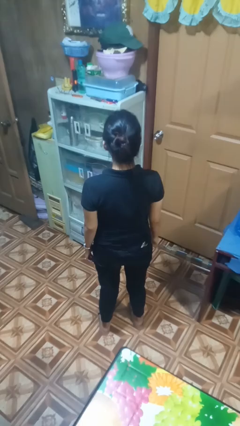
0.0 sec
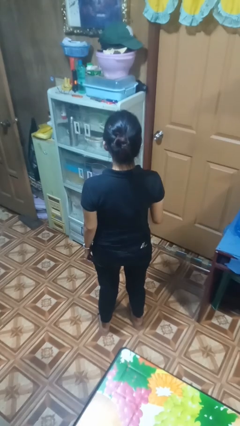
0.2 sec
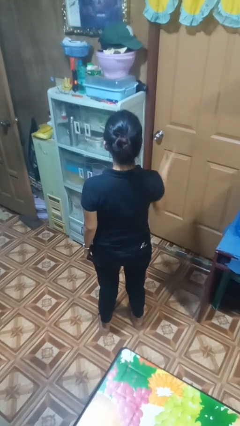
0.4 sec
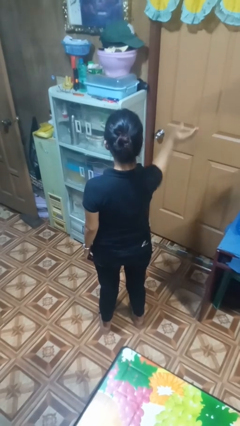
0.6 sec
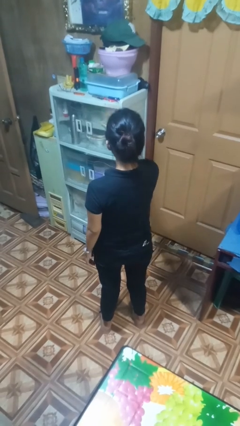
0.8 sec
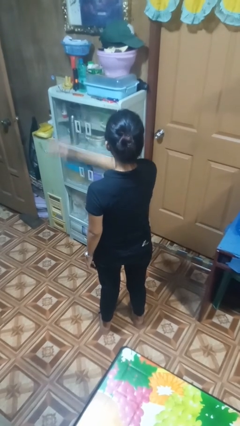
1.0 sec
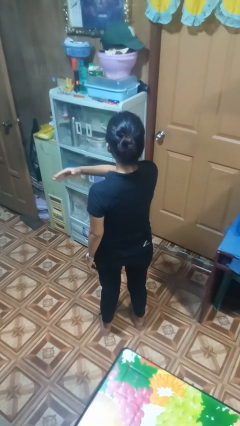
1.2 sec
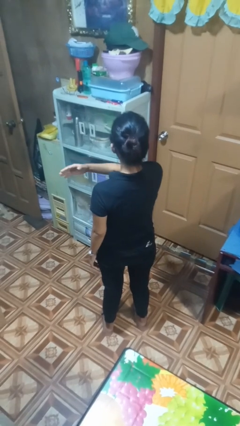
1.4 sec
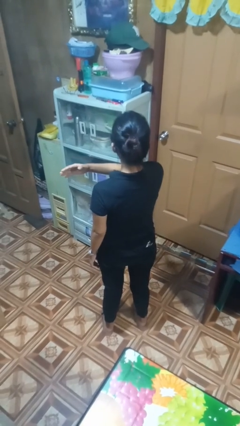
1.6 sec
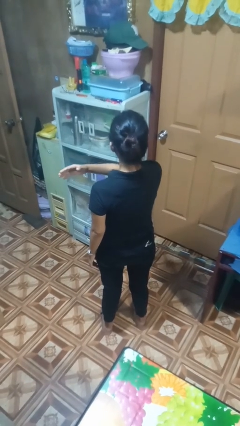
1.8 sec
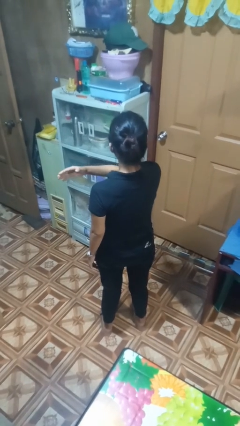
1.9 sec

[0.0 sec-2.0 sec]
person gestures swipe left

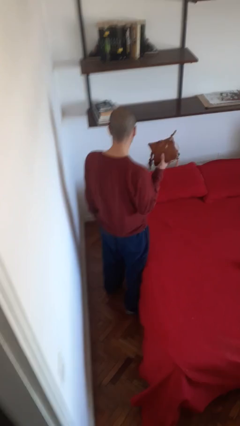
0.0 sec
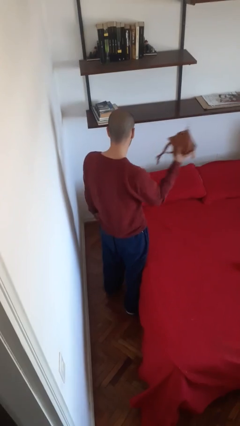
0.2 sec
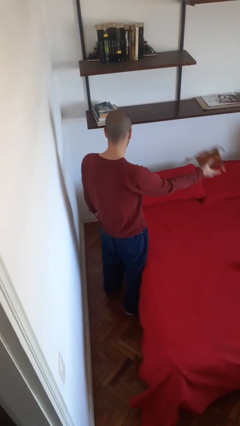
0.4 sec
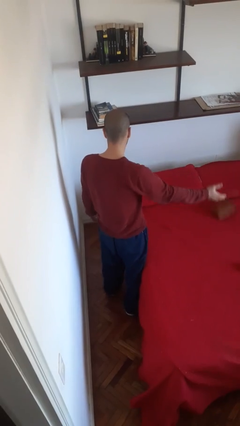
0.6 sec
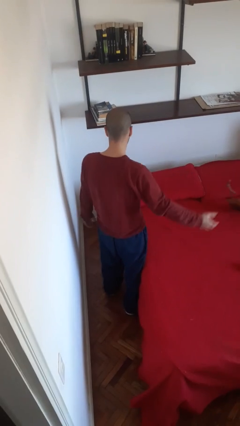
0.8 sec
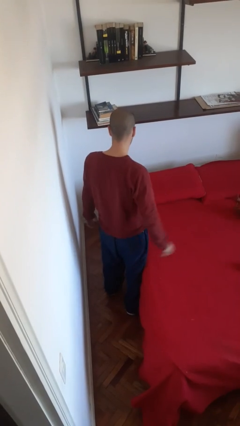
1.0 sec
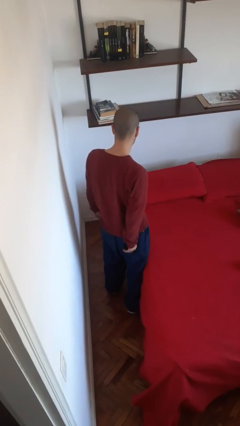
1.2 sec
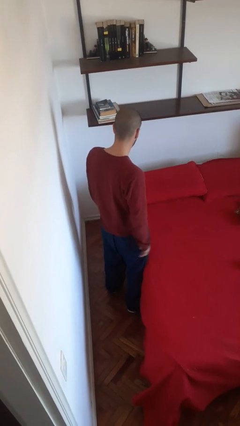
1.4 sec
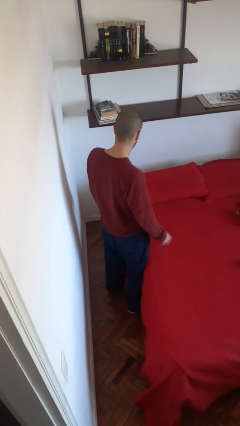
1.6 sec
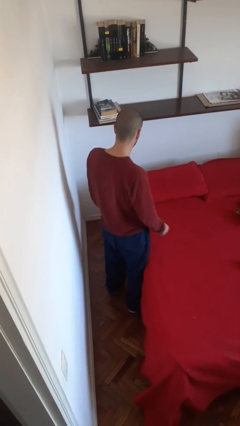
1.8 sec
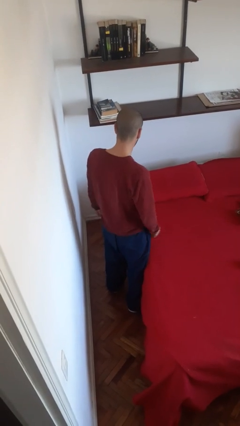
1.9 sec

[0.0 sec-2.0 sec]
person throws object on bed

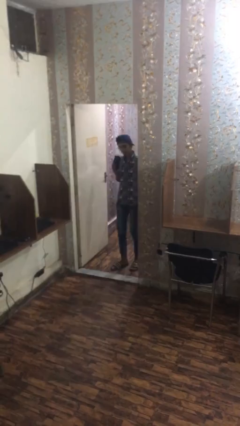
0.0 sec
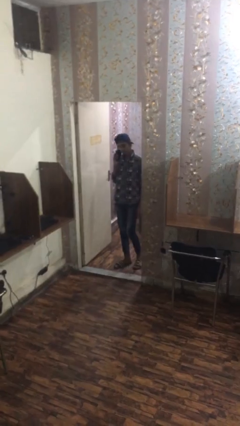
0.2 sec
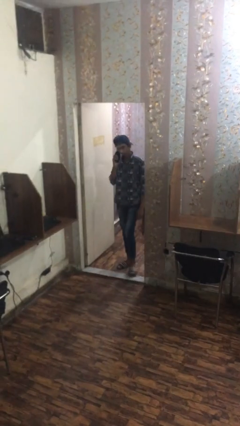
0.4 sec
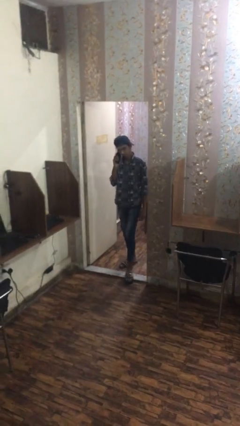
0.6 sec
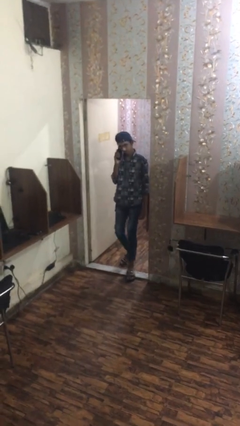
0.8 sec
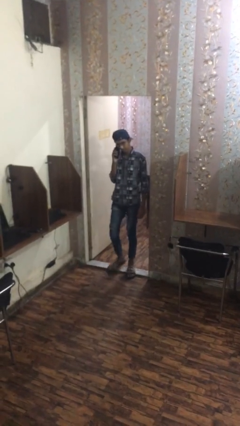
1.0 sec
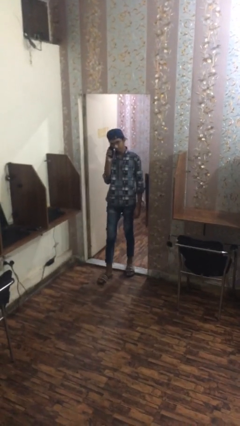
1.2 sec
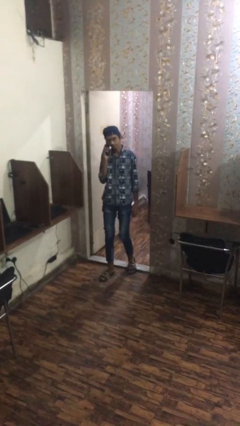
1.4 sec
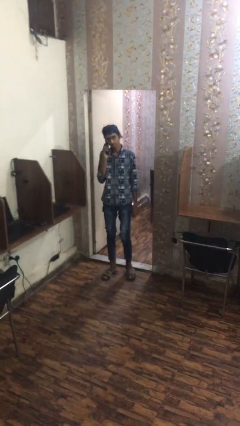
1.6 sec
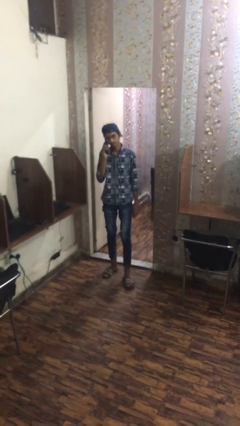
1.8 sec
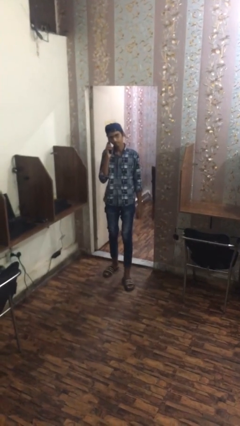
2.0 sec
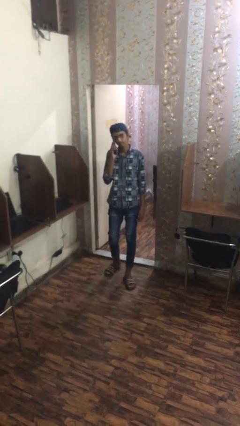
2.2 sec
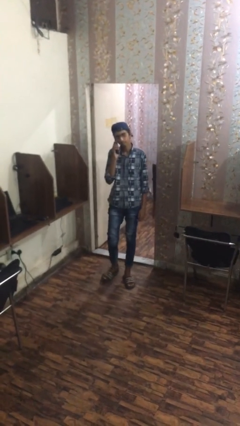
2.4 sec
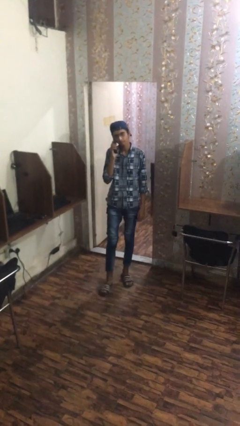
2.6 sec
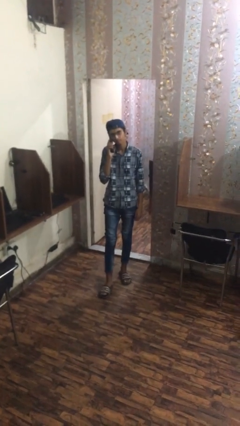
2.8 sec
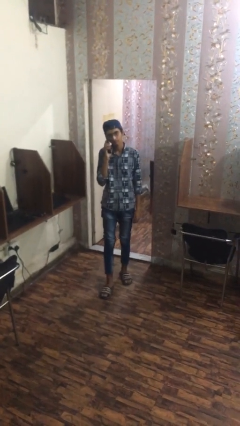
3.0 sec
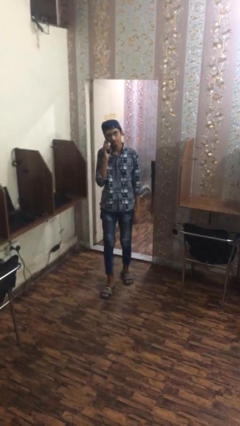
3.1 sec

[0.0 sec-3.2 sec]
person enters scene through structure

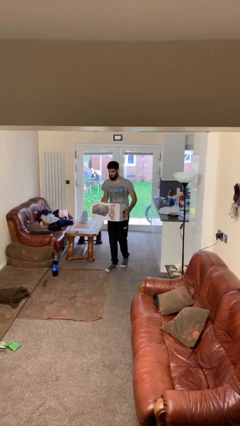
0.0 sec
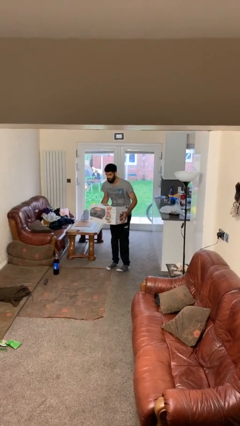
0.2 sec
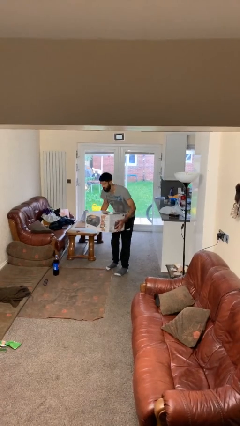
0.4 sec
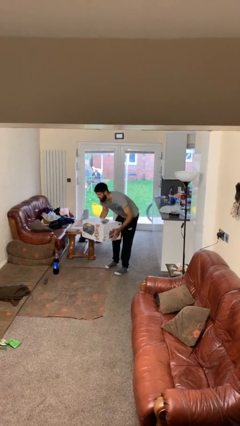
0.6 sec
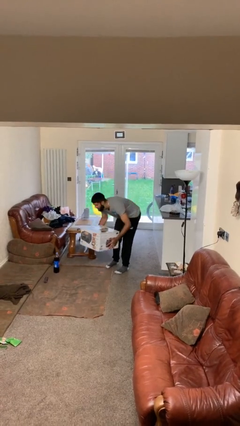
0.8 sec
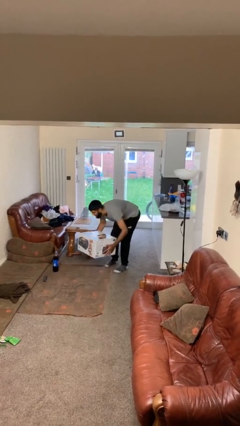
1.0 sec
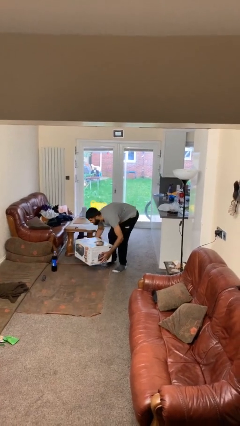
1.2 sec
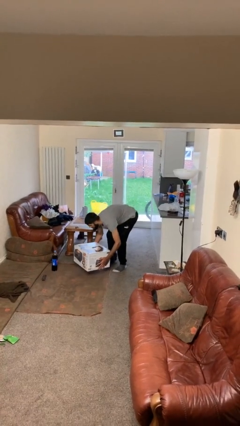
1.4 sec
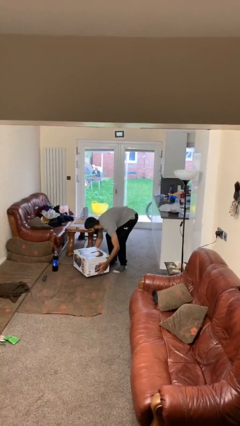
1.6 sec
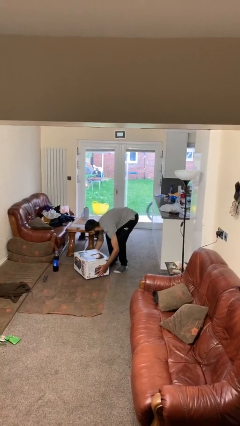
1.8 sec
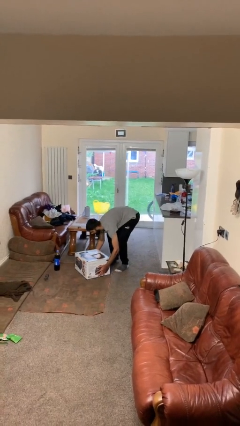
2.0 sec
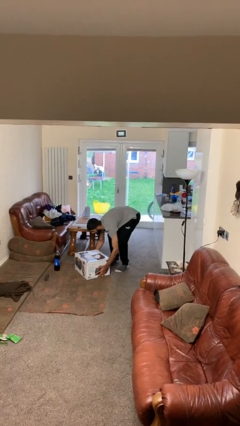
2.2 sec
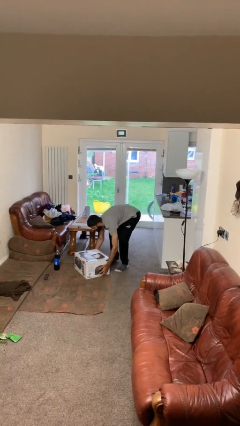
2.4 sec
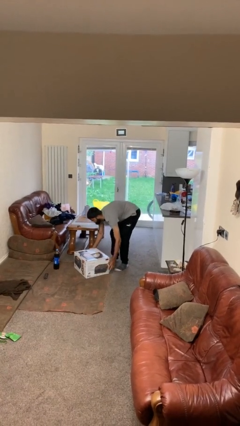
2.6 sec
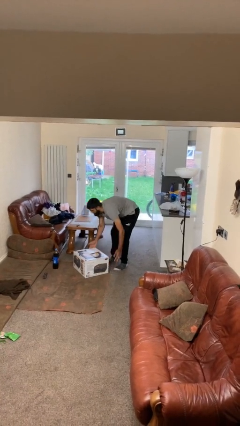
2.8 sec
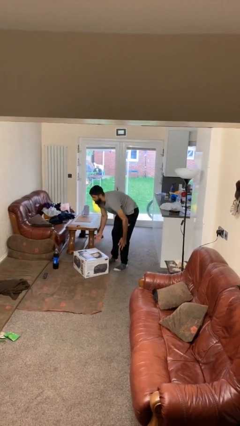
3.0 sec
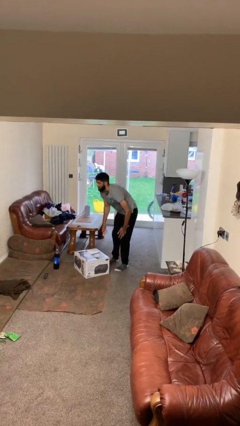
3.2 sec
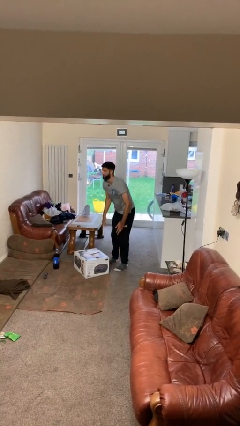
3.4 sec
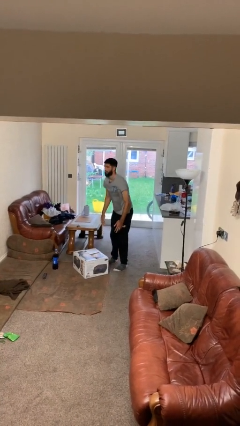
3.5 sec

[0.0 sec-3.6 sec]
person puts down object on floor

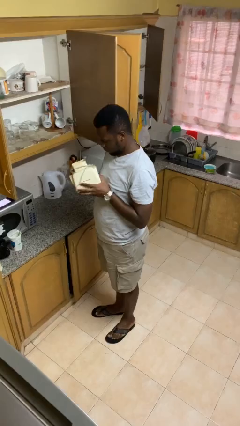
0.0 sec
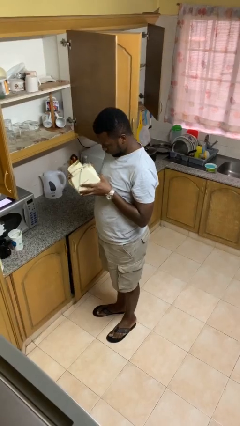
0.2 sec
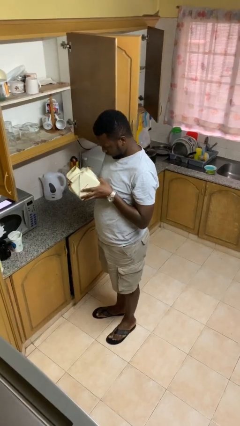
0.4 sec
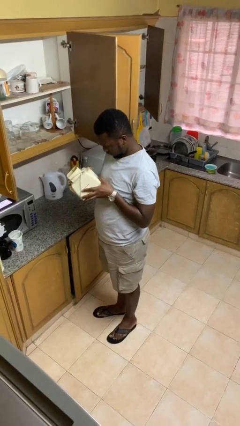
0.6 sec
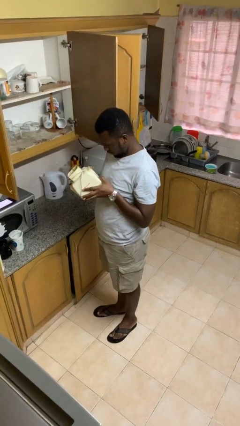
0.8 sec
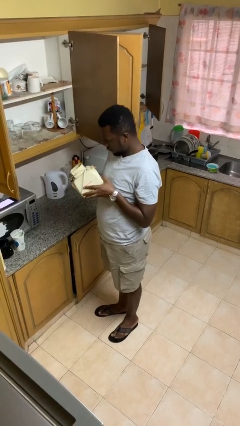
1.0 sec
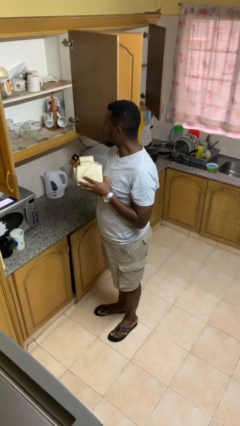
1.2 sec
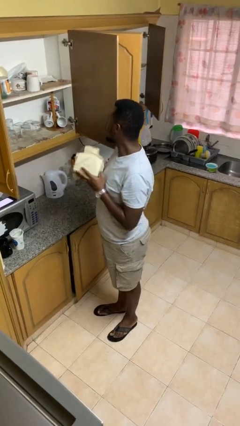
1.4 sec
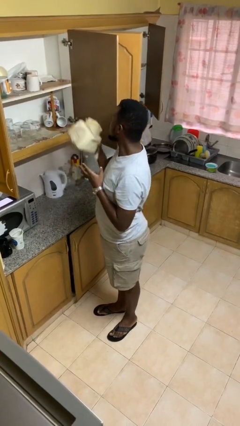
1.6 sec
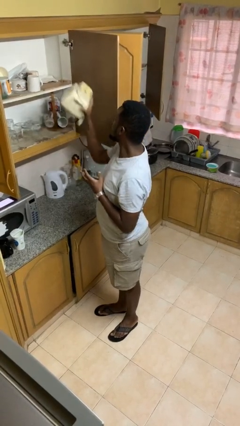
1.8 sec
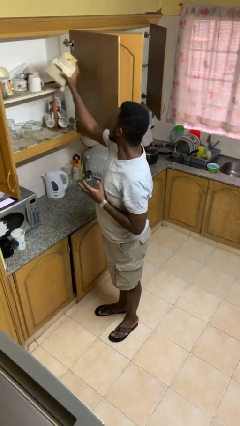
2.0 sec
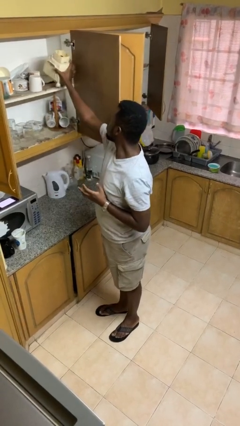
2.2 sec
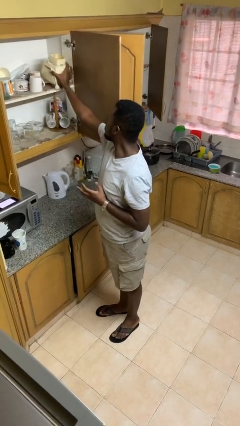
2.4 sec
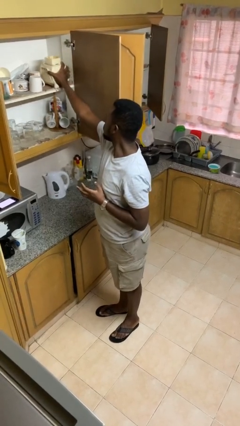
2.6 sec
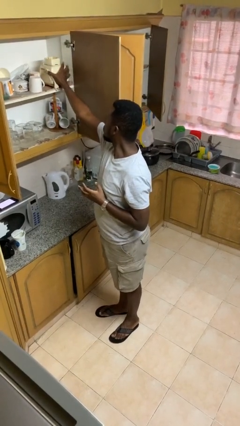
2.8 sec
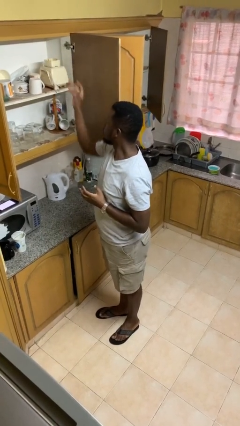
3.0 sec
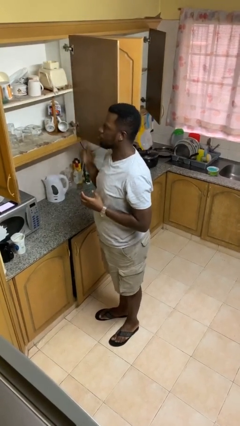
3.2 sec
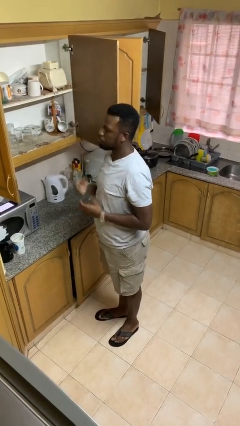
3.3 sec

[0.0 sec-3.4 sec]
person puts down object on shelf

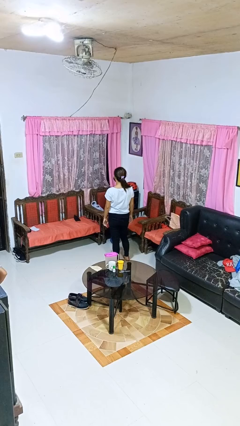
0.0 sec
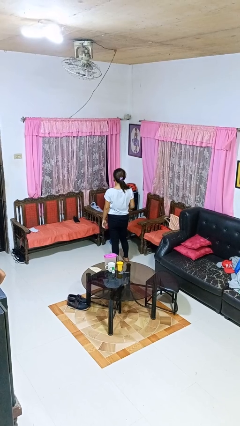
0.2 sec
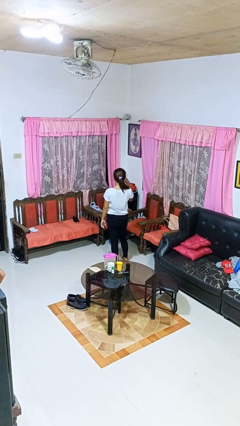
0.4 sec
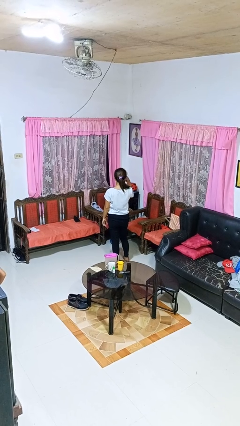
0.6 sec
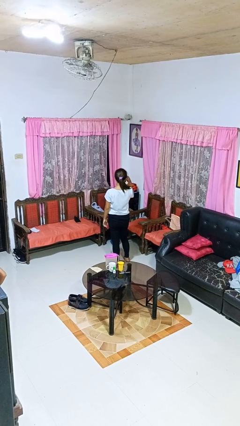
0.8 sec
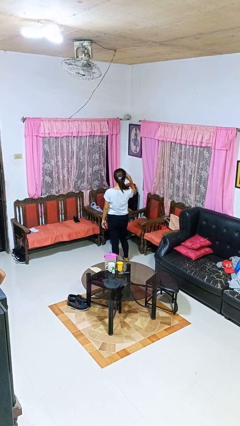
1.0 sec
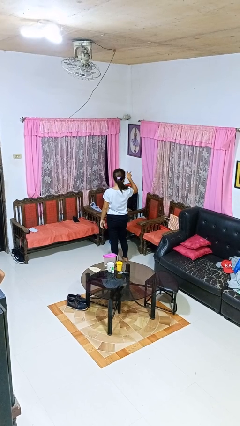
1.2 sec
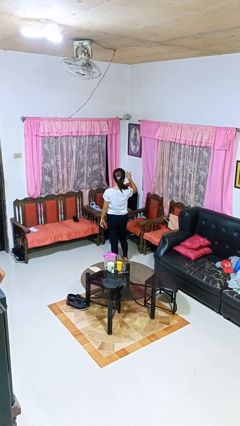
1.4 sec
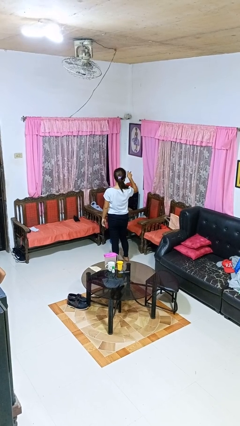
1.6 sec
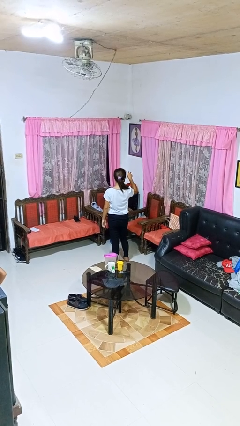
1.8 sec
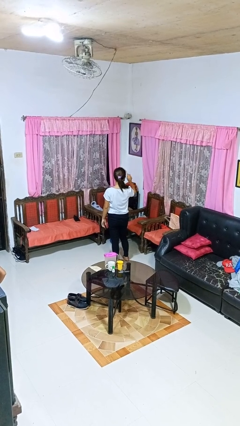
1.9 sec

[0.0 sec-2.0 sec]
person gestures watch closely

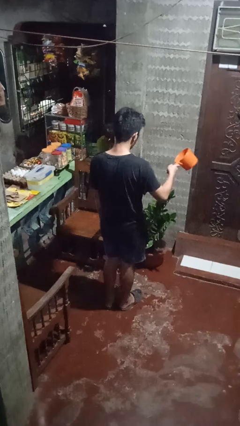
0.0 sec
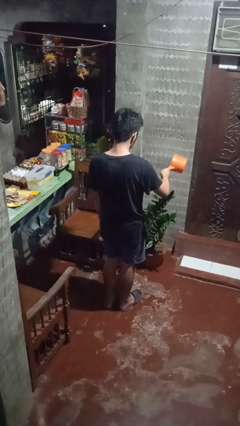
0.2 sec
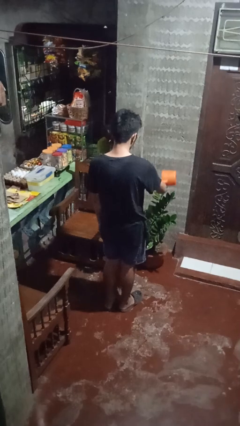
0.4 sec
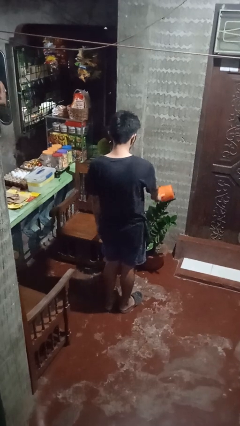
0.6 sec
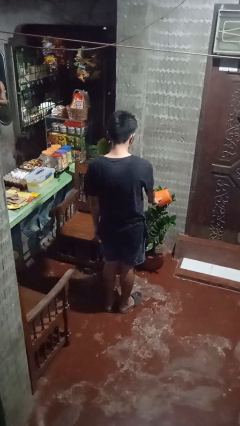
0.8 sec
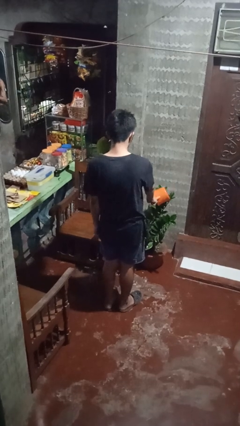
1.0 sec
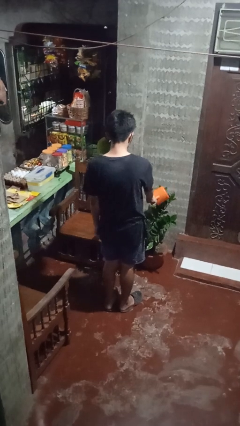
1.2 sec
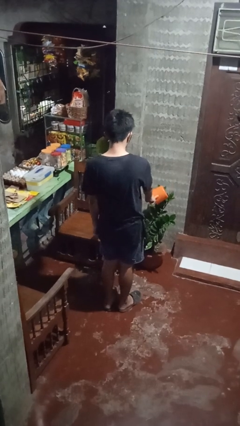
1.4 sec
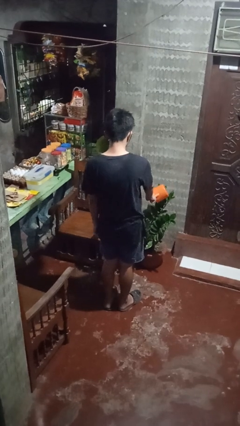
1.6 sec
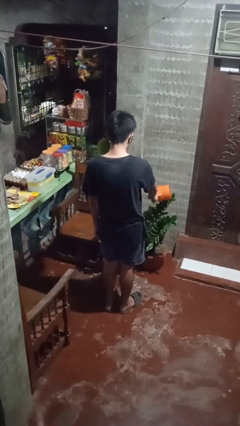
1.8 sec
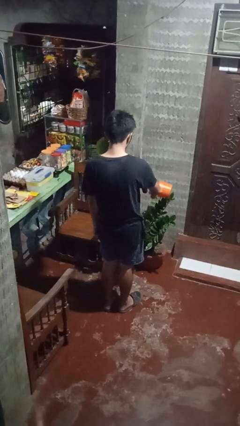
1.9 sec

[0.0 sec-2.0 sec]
person waters houseplant
